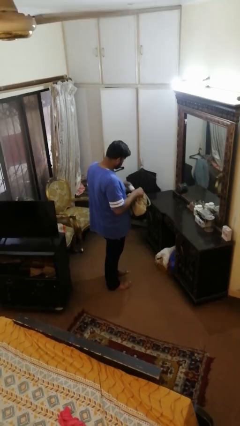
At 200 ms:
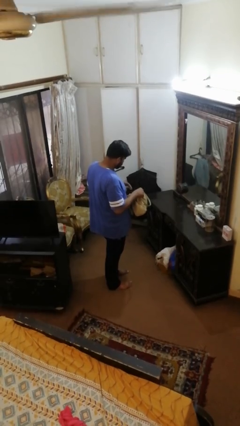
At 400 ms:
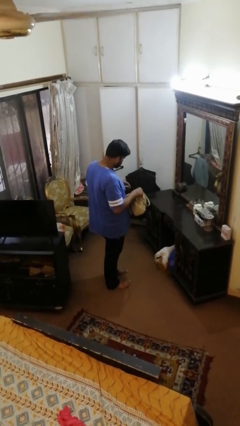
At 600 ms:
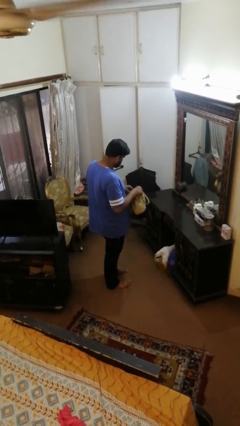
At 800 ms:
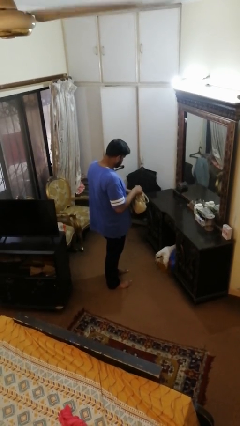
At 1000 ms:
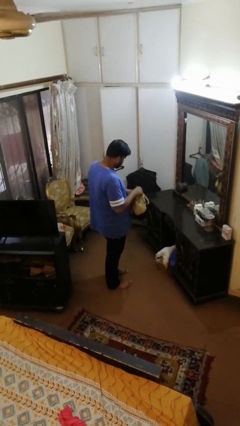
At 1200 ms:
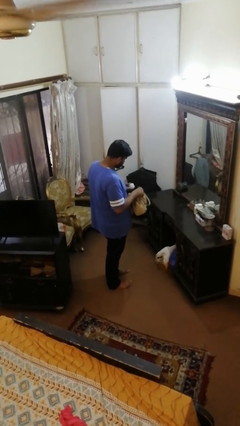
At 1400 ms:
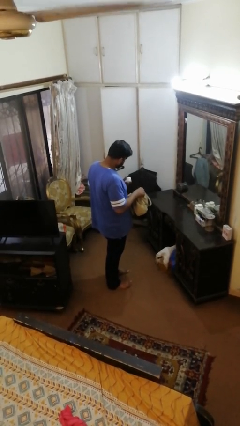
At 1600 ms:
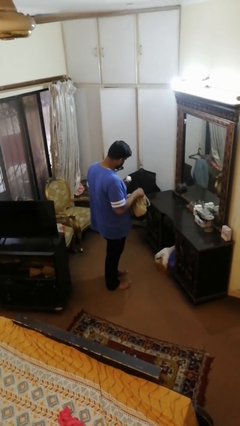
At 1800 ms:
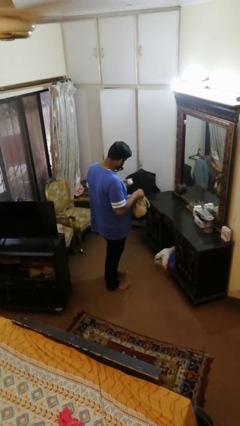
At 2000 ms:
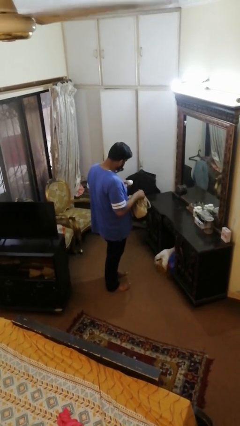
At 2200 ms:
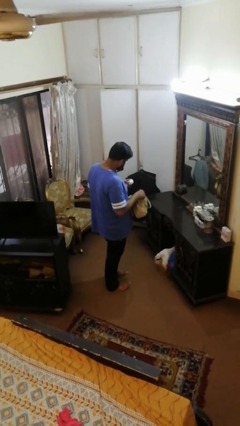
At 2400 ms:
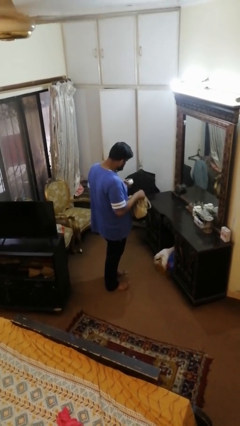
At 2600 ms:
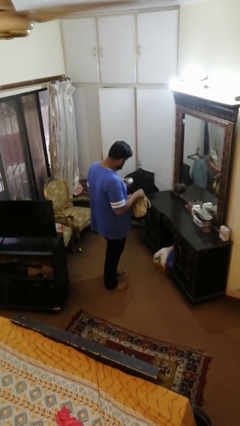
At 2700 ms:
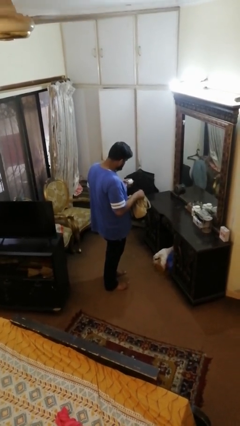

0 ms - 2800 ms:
person takes object from purse

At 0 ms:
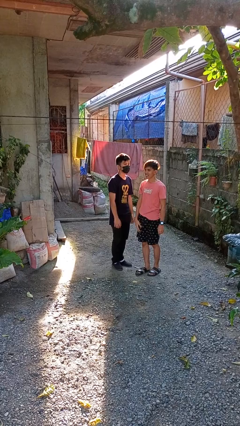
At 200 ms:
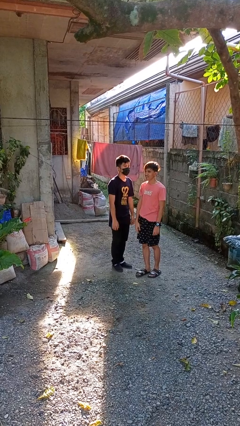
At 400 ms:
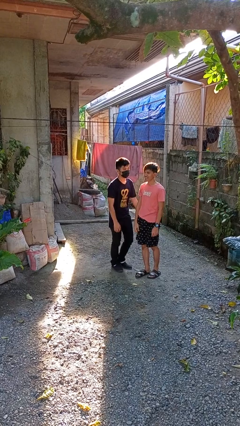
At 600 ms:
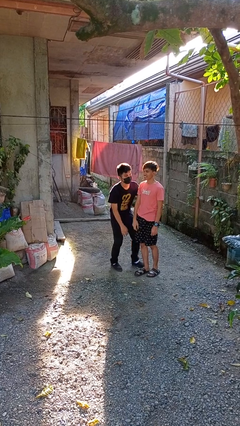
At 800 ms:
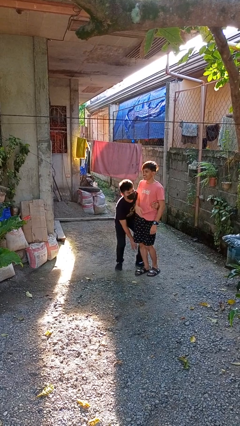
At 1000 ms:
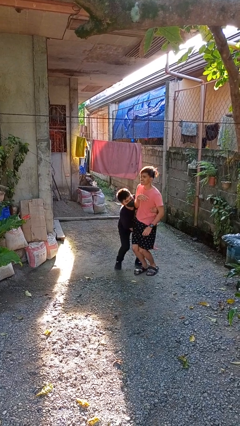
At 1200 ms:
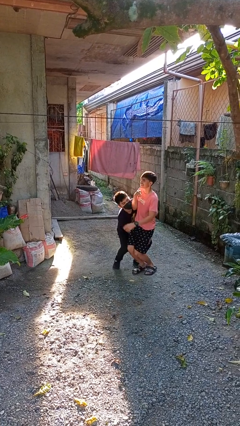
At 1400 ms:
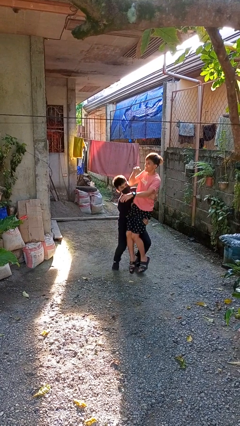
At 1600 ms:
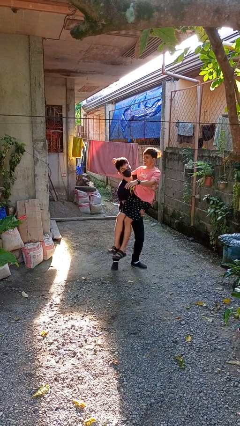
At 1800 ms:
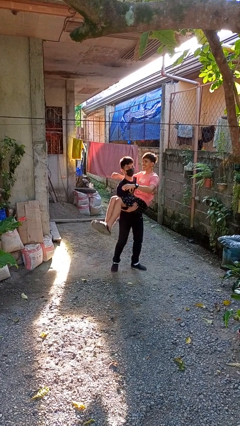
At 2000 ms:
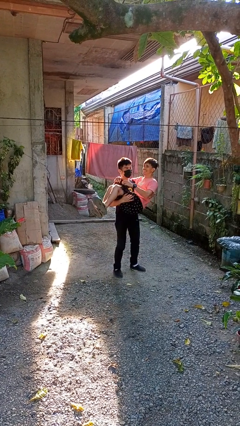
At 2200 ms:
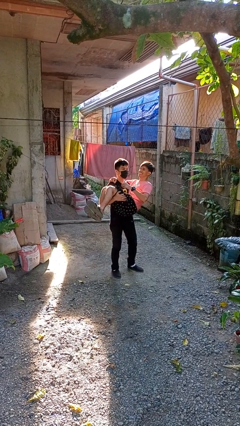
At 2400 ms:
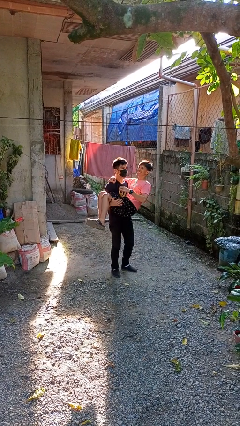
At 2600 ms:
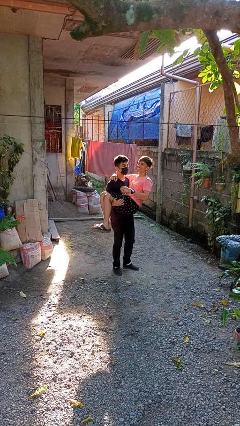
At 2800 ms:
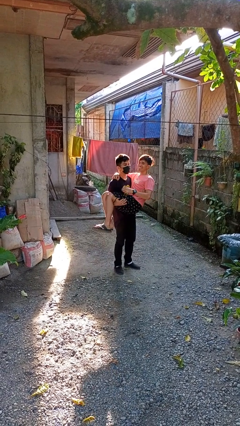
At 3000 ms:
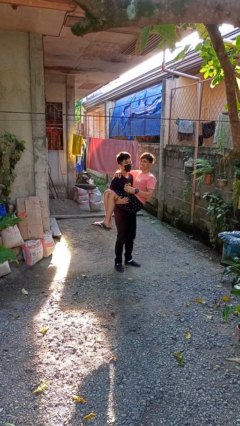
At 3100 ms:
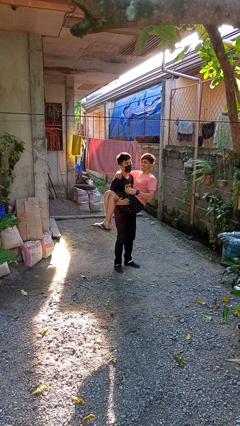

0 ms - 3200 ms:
person picks up person

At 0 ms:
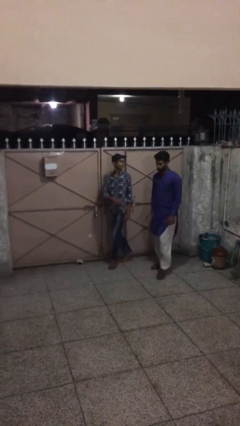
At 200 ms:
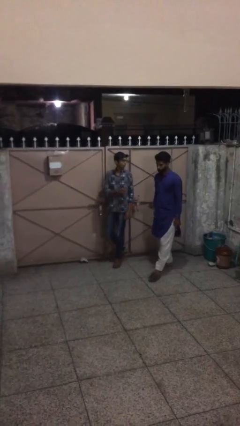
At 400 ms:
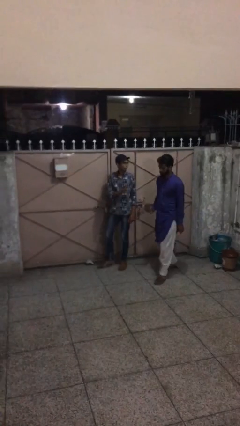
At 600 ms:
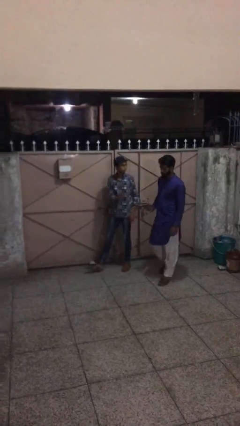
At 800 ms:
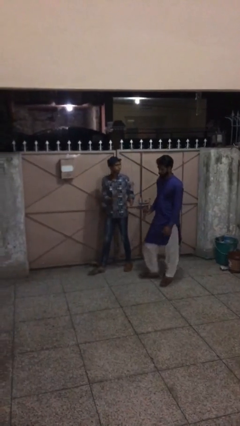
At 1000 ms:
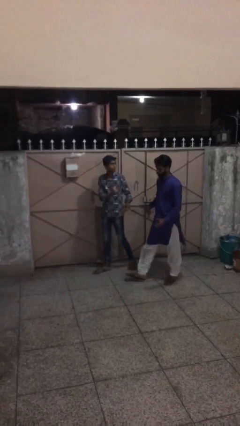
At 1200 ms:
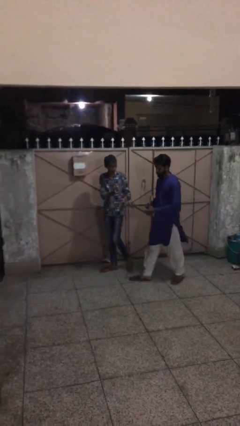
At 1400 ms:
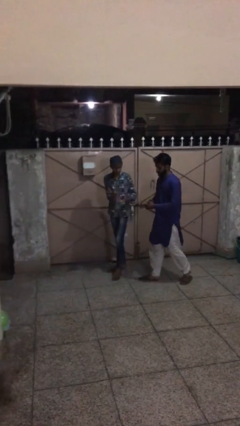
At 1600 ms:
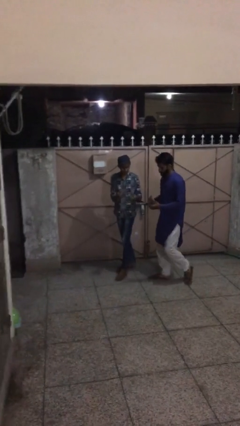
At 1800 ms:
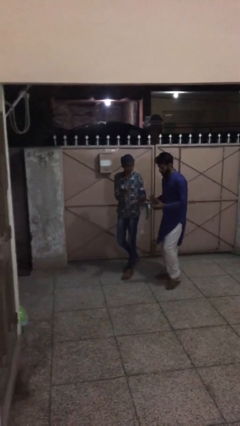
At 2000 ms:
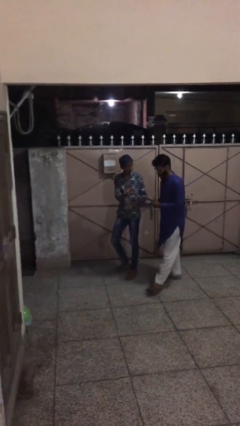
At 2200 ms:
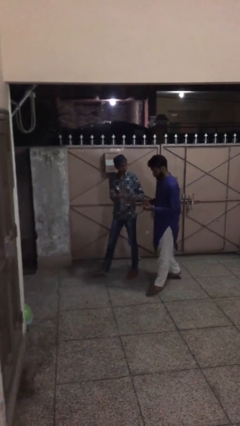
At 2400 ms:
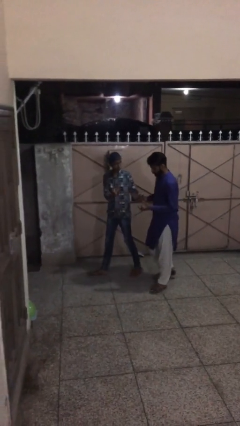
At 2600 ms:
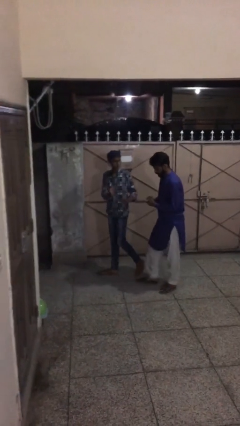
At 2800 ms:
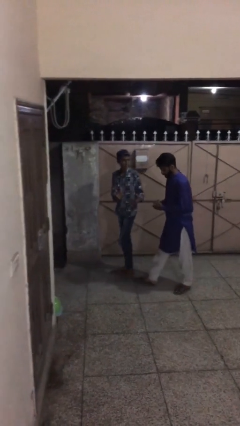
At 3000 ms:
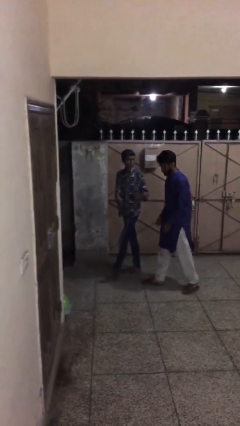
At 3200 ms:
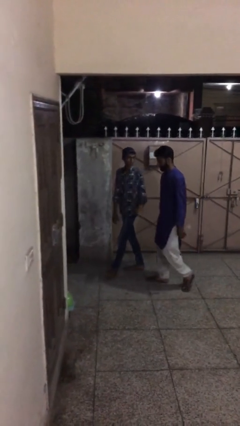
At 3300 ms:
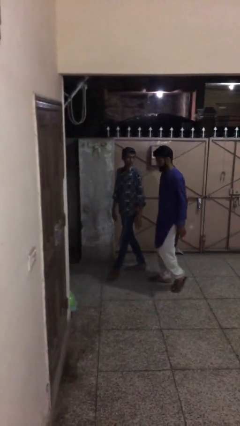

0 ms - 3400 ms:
person talks to person

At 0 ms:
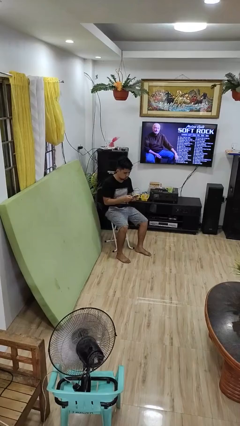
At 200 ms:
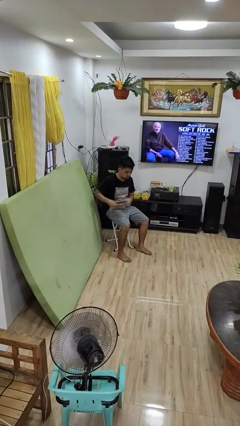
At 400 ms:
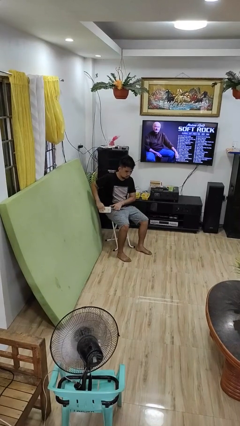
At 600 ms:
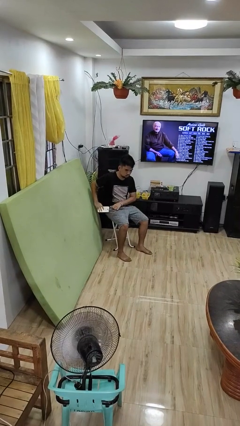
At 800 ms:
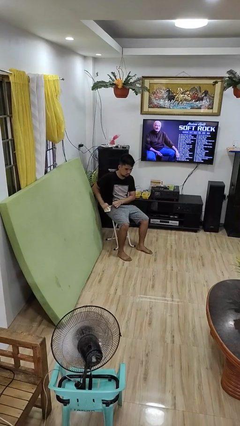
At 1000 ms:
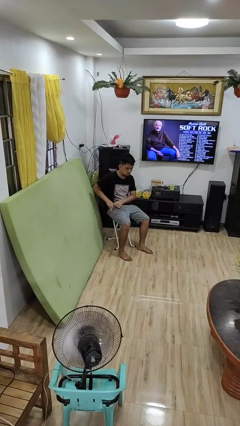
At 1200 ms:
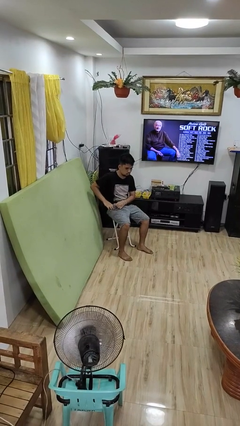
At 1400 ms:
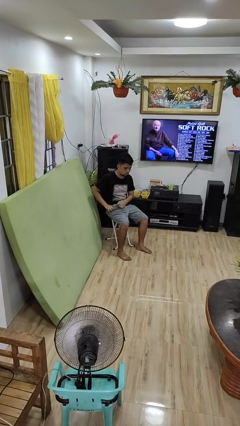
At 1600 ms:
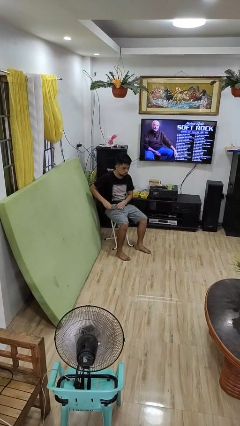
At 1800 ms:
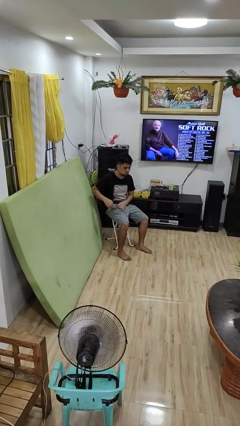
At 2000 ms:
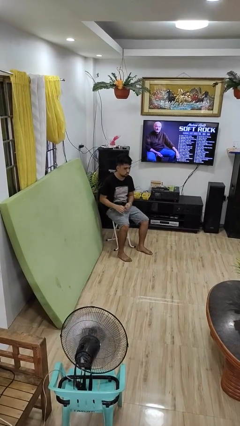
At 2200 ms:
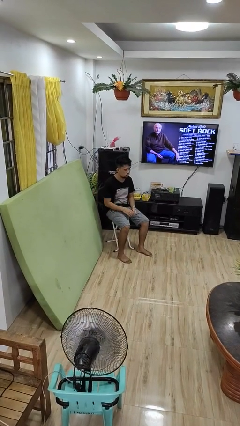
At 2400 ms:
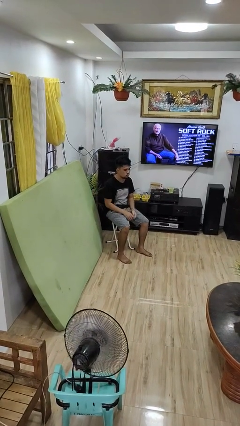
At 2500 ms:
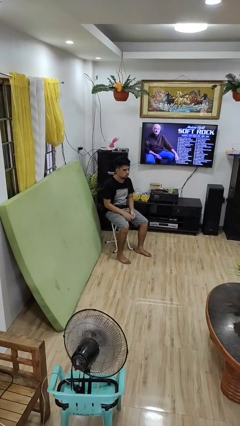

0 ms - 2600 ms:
person puts phone into pocket

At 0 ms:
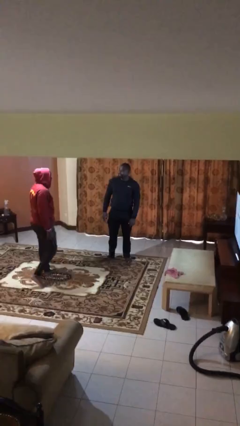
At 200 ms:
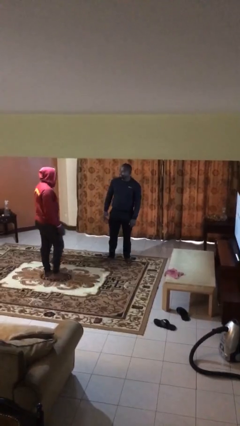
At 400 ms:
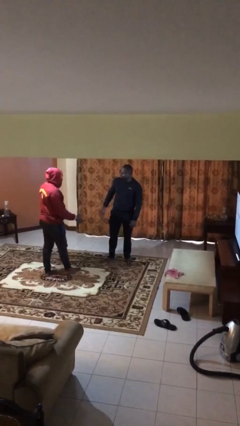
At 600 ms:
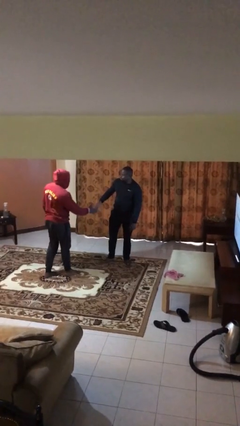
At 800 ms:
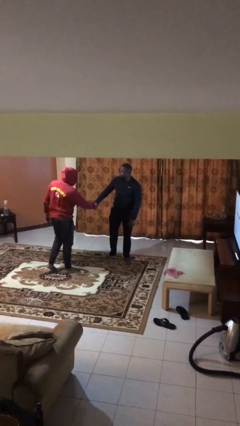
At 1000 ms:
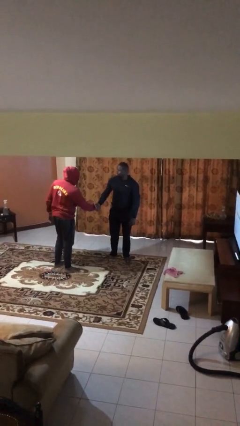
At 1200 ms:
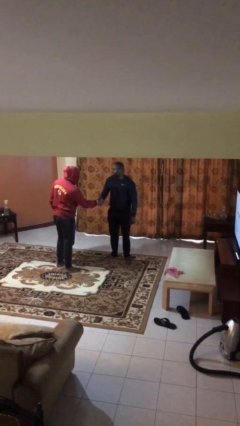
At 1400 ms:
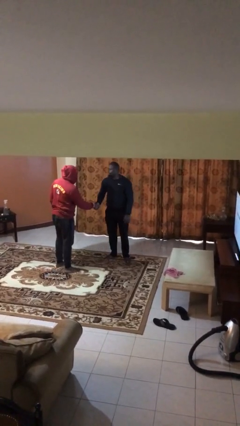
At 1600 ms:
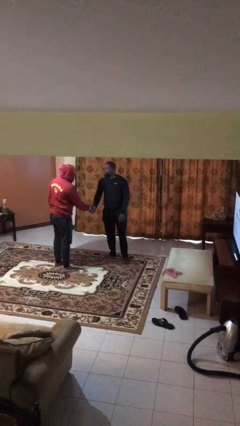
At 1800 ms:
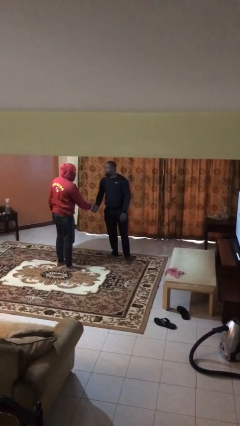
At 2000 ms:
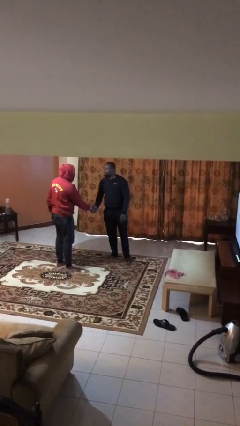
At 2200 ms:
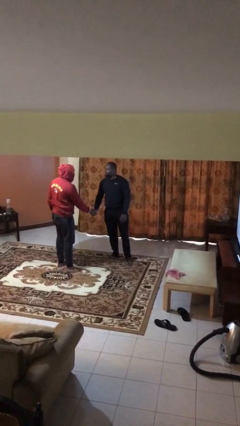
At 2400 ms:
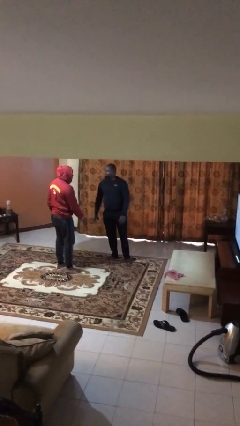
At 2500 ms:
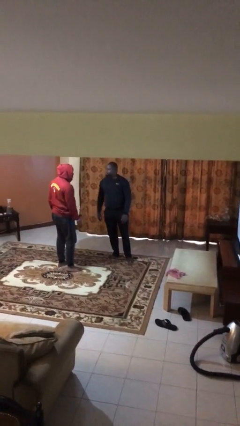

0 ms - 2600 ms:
person shakes hand

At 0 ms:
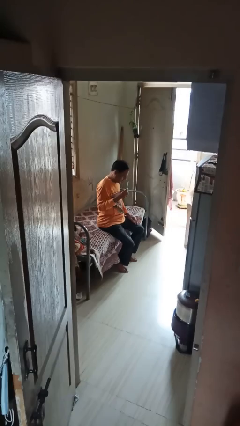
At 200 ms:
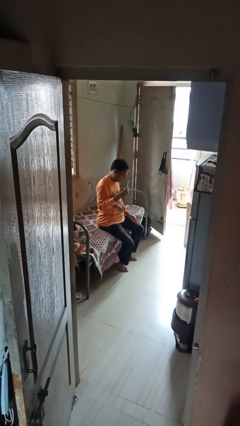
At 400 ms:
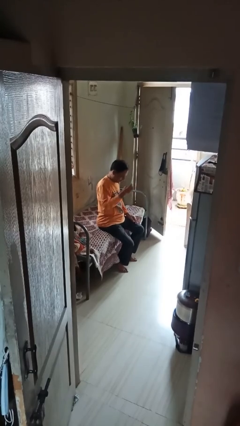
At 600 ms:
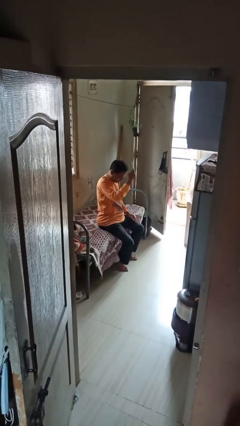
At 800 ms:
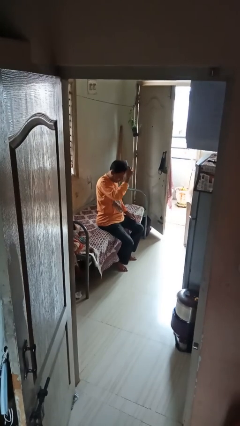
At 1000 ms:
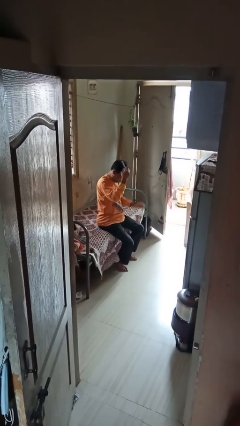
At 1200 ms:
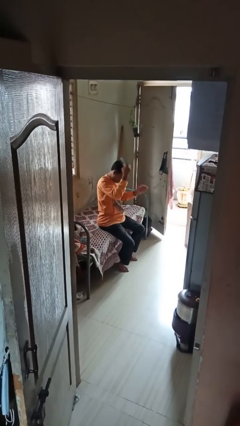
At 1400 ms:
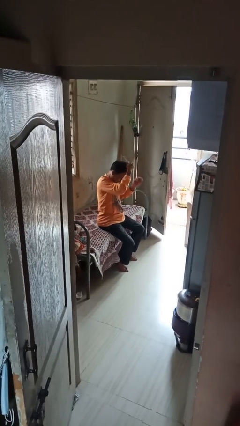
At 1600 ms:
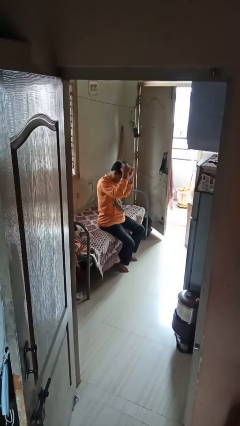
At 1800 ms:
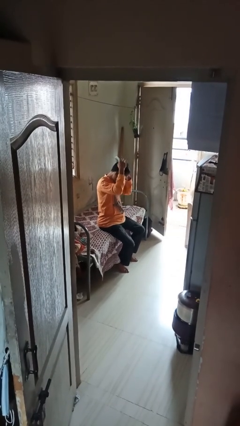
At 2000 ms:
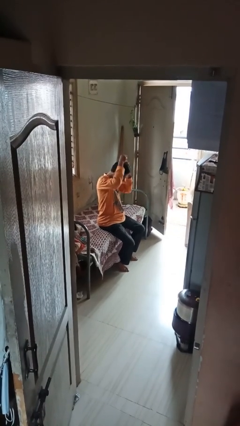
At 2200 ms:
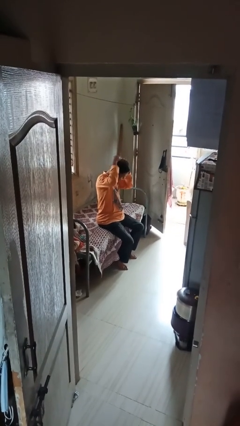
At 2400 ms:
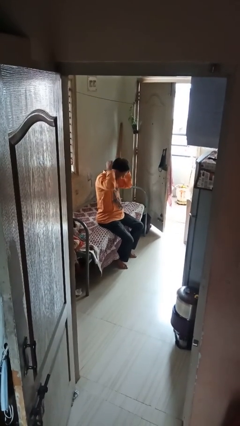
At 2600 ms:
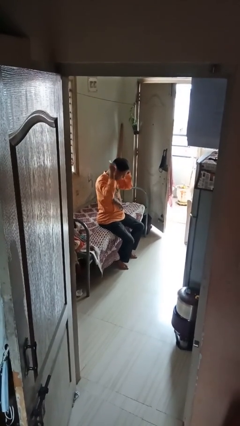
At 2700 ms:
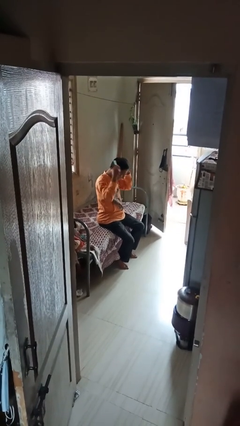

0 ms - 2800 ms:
person brushes hair

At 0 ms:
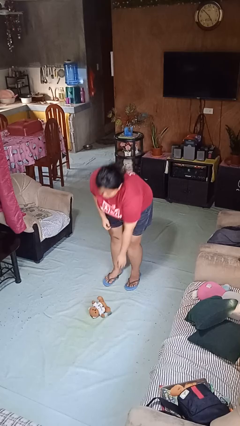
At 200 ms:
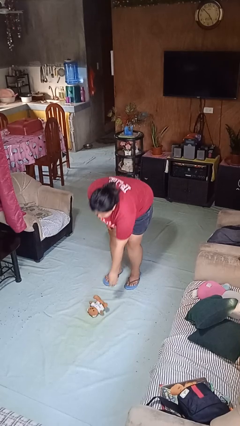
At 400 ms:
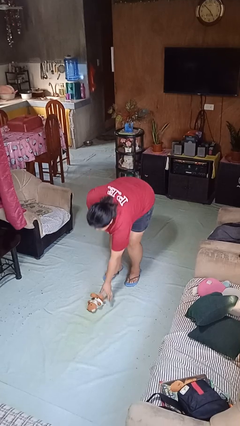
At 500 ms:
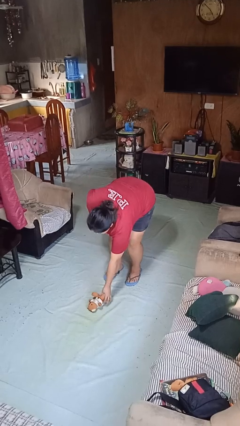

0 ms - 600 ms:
person picks up object from floor
